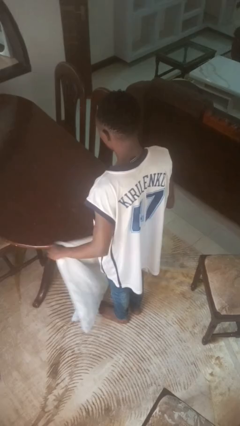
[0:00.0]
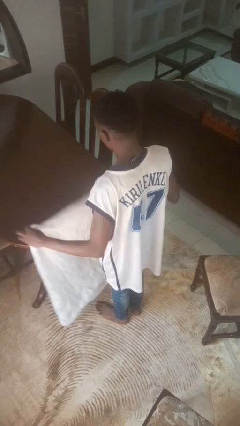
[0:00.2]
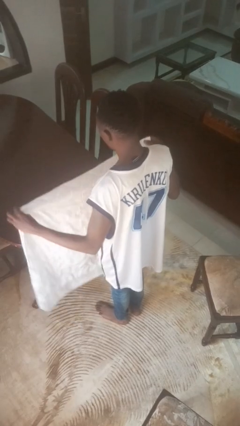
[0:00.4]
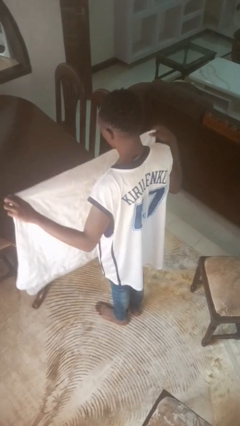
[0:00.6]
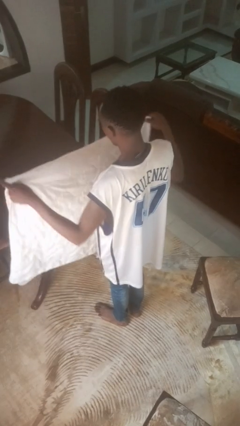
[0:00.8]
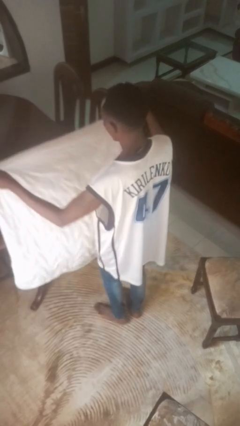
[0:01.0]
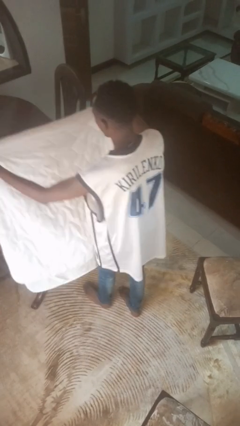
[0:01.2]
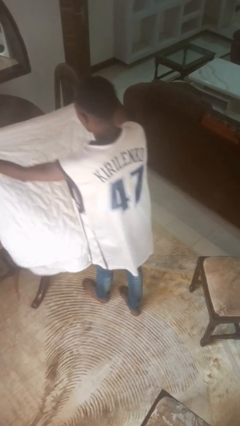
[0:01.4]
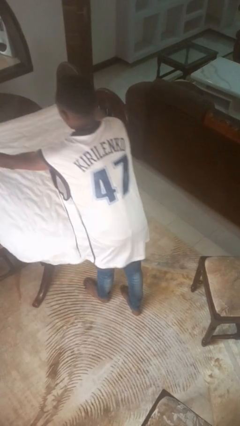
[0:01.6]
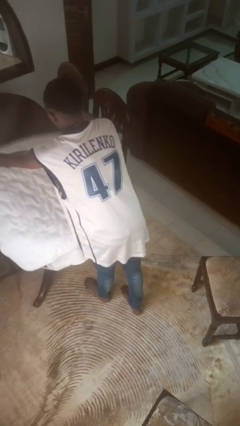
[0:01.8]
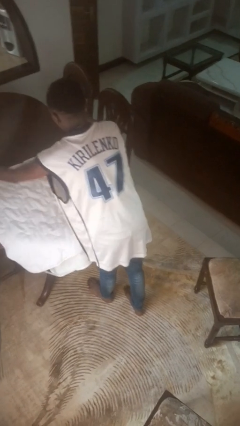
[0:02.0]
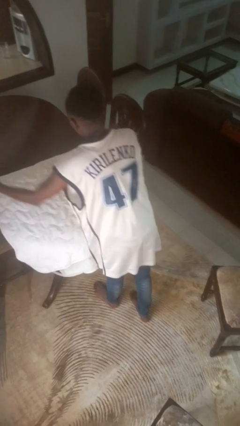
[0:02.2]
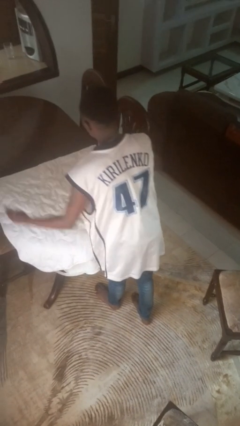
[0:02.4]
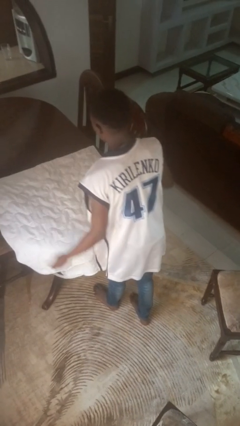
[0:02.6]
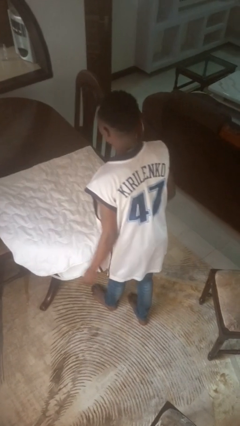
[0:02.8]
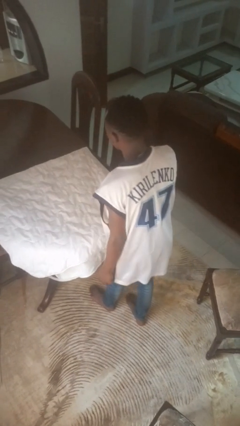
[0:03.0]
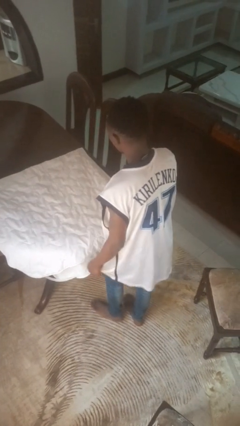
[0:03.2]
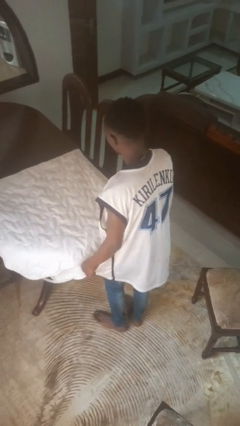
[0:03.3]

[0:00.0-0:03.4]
person spreads tablecloth

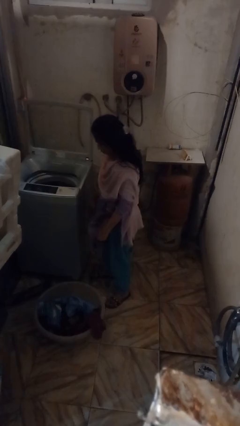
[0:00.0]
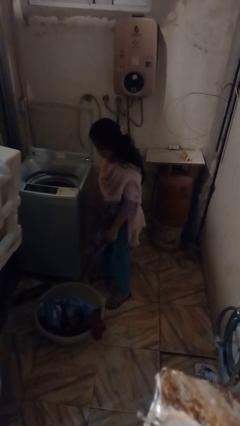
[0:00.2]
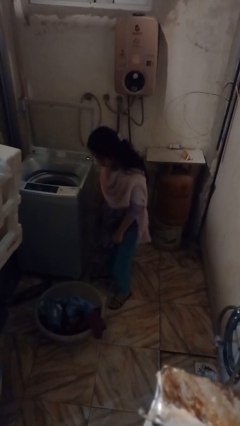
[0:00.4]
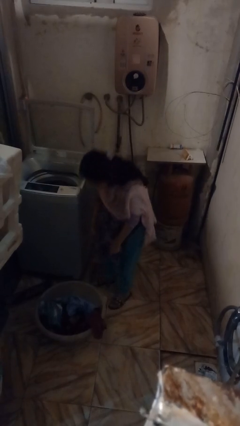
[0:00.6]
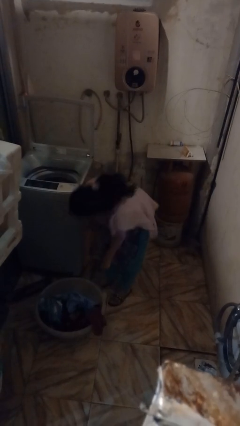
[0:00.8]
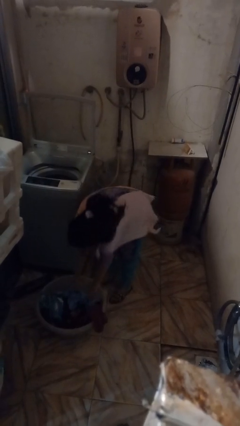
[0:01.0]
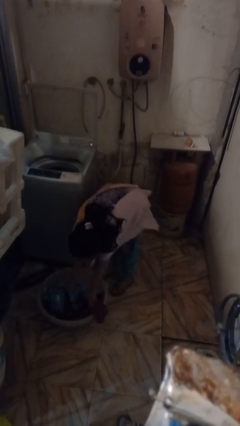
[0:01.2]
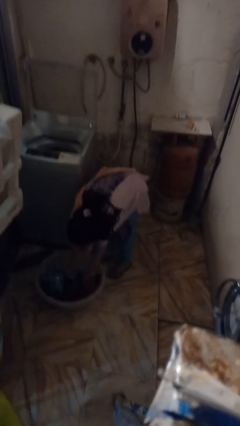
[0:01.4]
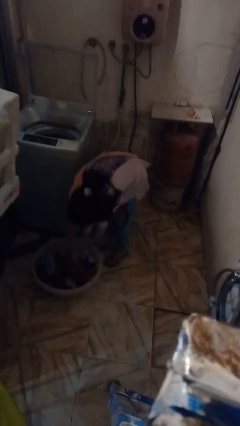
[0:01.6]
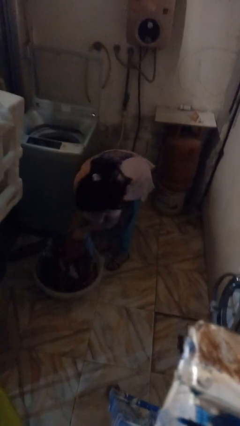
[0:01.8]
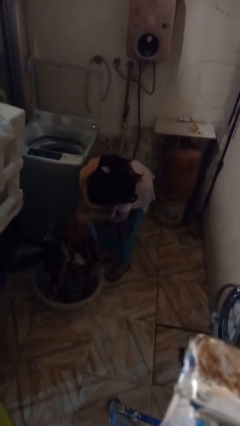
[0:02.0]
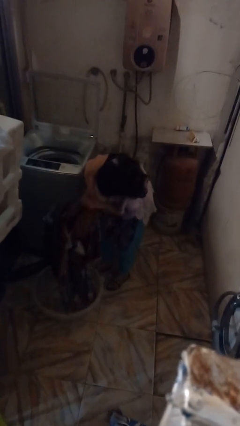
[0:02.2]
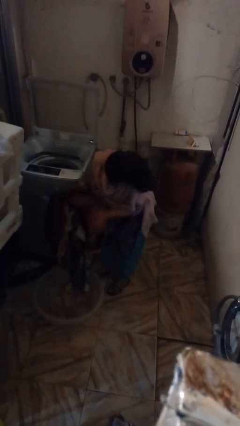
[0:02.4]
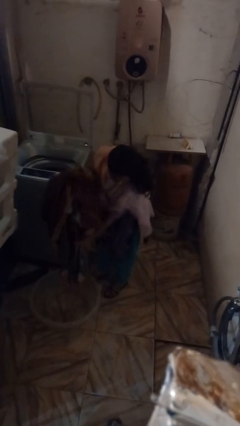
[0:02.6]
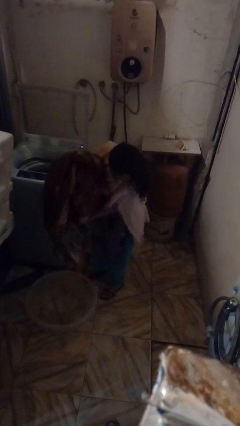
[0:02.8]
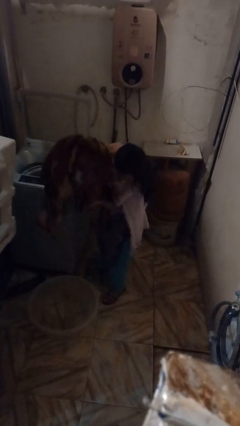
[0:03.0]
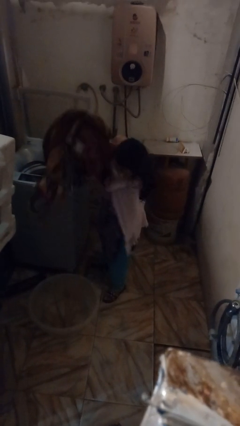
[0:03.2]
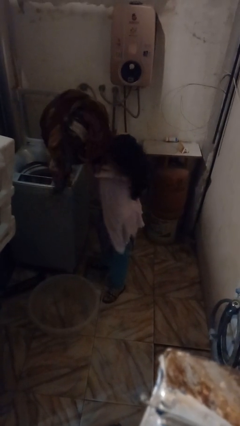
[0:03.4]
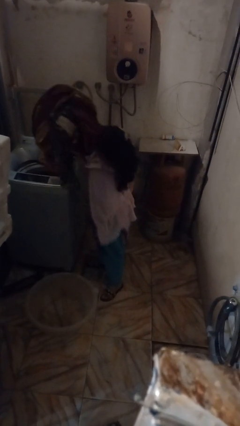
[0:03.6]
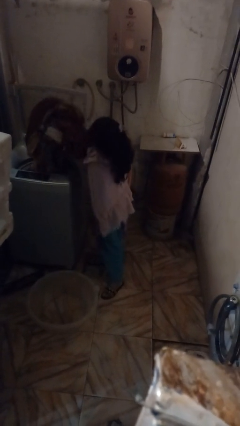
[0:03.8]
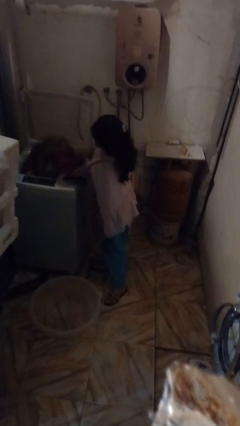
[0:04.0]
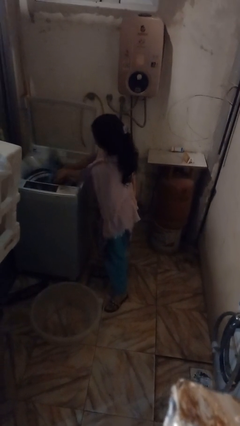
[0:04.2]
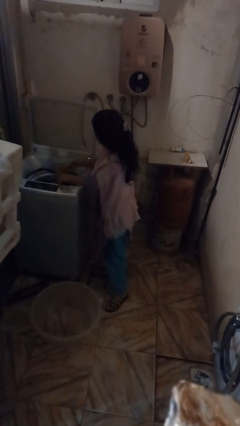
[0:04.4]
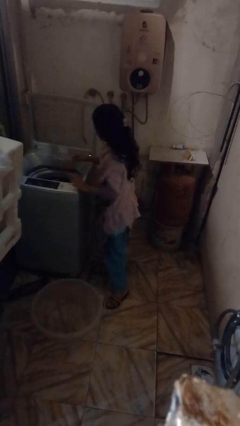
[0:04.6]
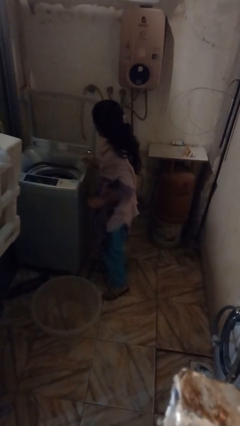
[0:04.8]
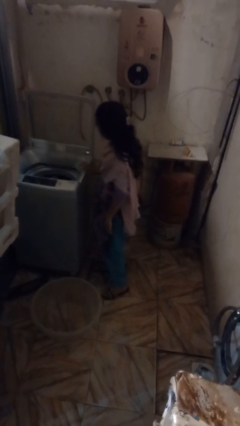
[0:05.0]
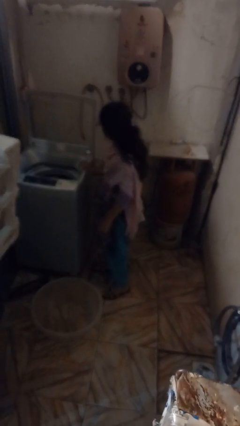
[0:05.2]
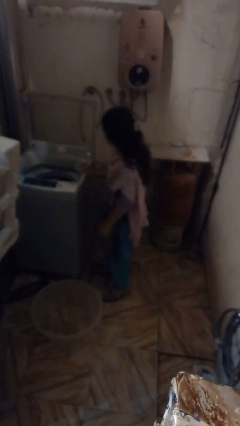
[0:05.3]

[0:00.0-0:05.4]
person loads clotheswasher

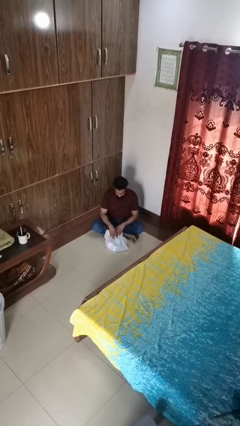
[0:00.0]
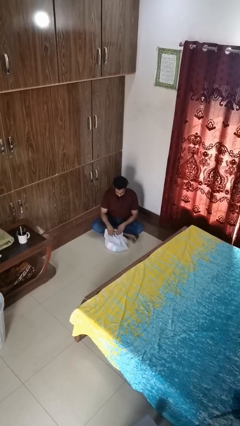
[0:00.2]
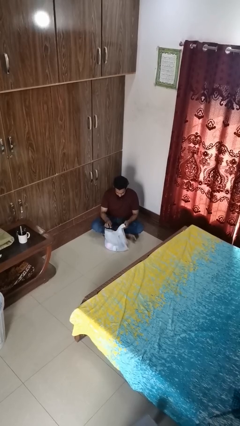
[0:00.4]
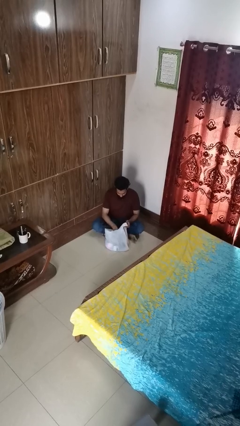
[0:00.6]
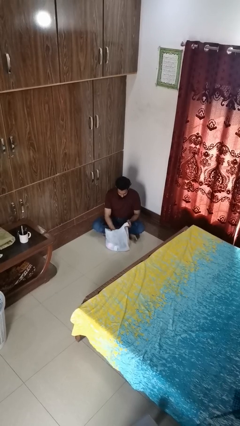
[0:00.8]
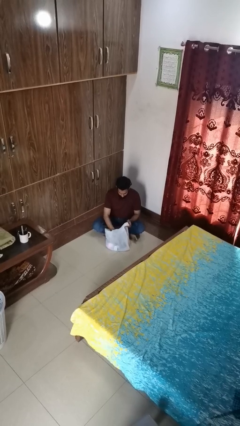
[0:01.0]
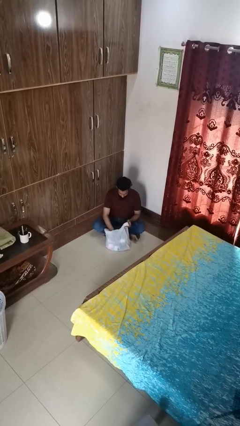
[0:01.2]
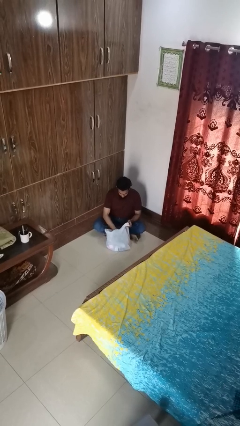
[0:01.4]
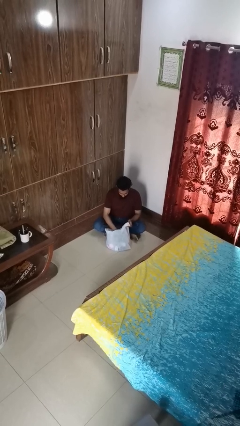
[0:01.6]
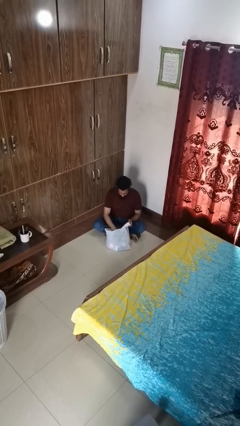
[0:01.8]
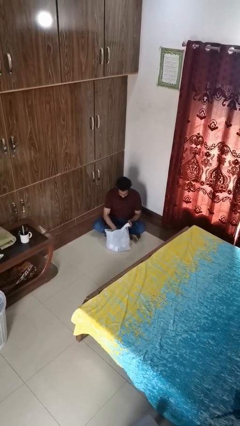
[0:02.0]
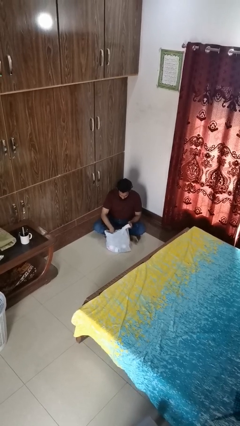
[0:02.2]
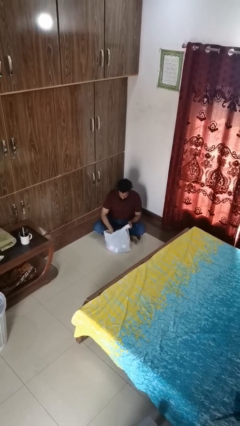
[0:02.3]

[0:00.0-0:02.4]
person searches in bag

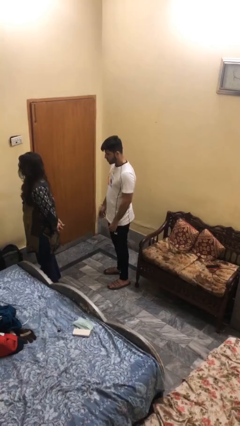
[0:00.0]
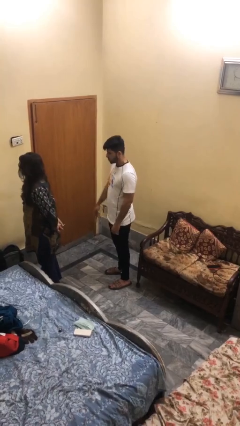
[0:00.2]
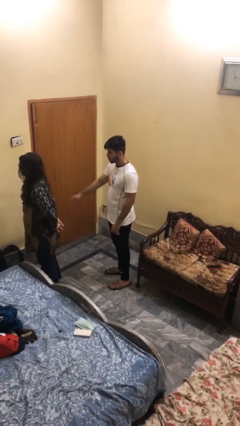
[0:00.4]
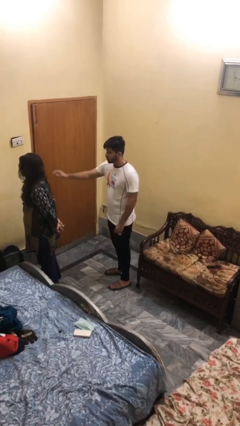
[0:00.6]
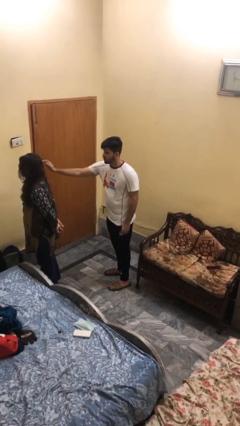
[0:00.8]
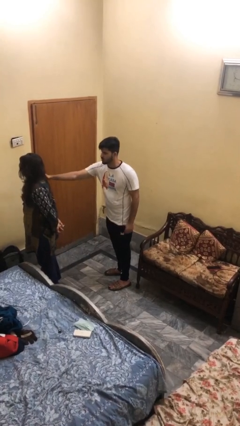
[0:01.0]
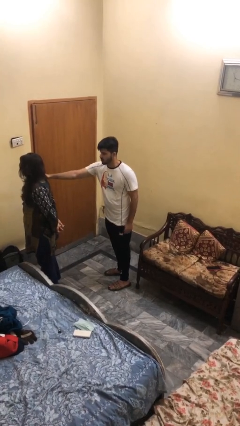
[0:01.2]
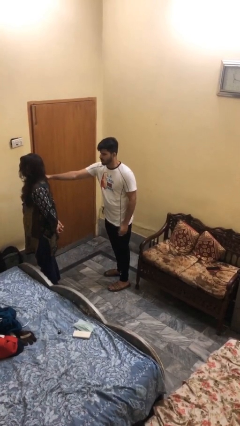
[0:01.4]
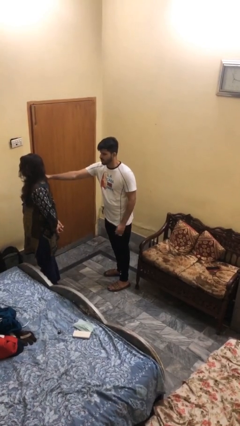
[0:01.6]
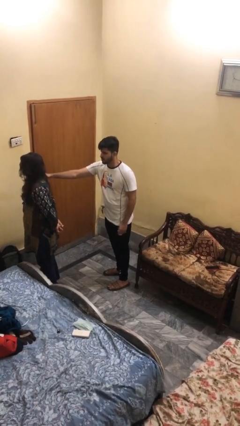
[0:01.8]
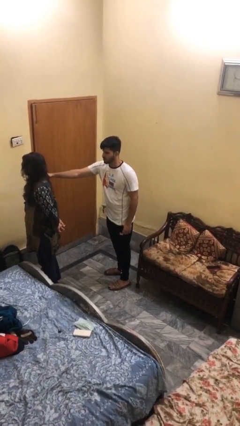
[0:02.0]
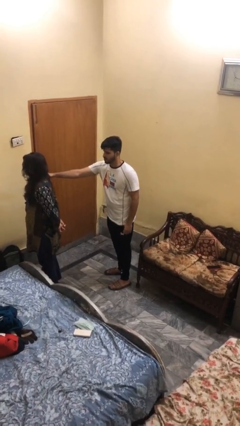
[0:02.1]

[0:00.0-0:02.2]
person grabs person by shoulder

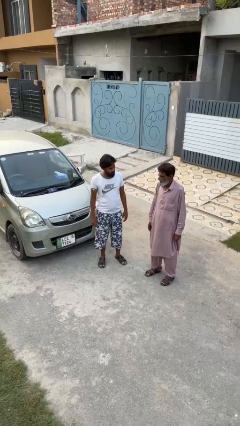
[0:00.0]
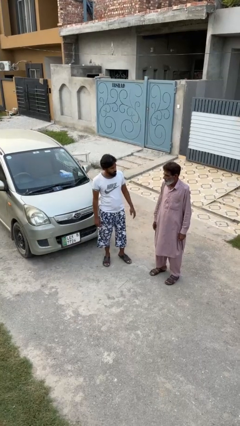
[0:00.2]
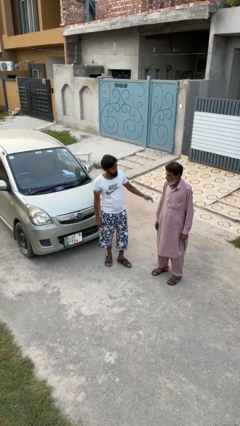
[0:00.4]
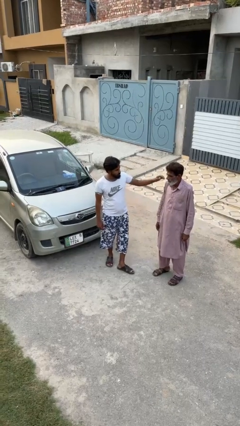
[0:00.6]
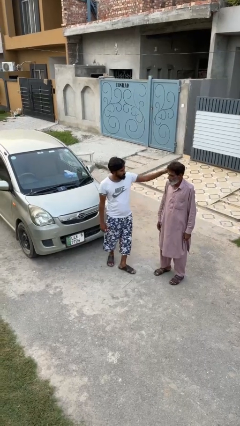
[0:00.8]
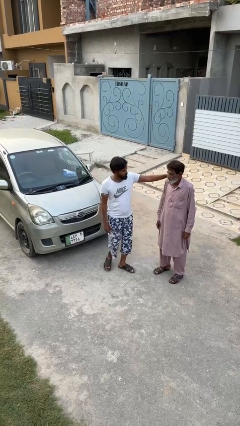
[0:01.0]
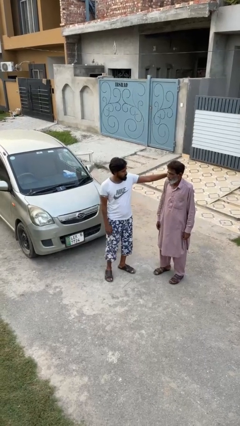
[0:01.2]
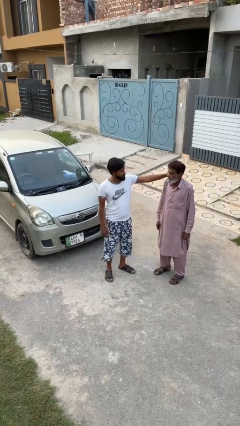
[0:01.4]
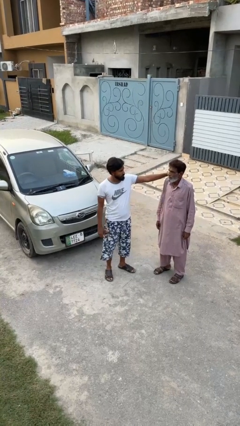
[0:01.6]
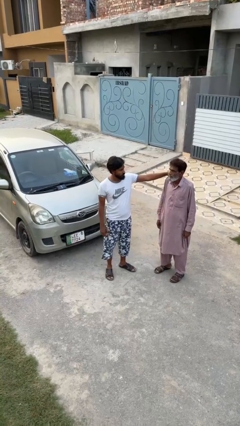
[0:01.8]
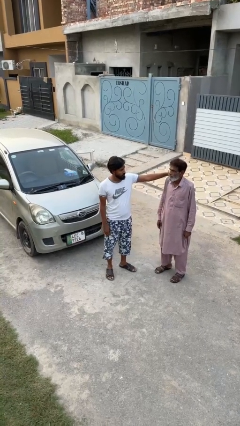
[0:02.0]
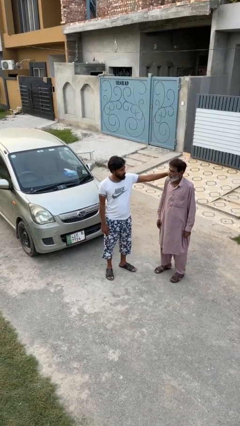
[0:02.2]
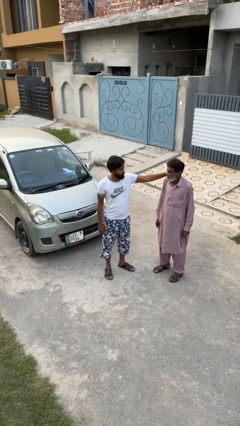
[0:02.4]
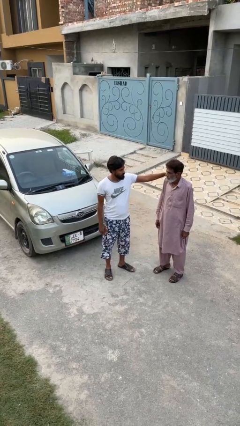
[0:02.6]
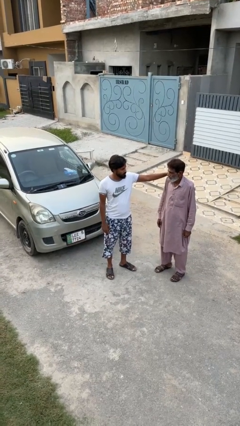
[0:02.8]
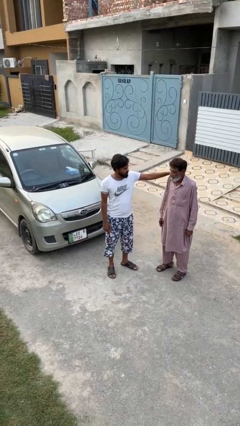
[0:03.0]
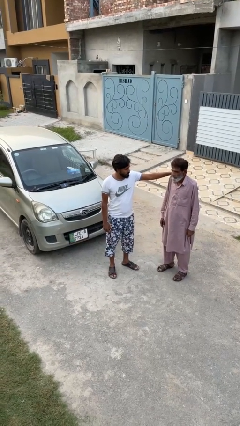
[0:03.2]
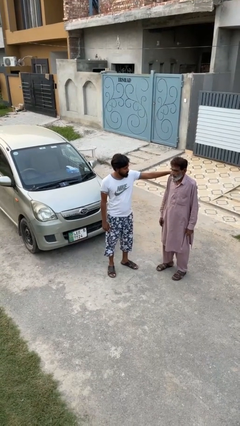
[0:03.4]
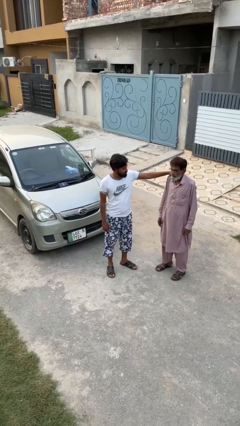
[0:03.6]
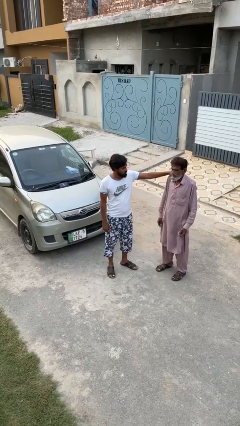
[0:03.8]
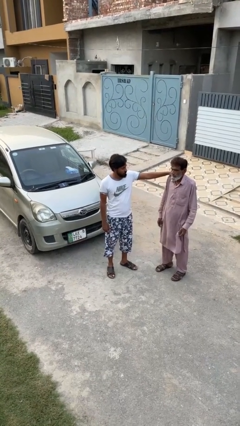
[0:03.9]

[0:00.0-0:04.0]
person pounds shoulders of person
